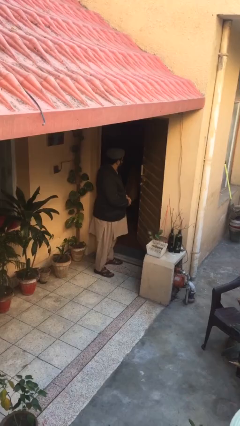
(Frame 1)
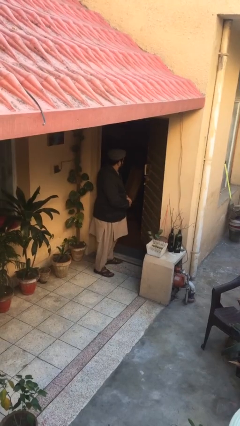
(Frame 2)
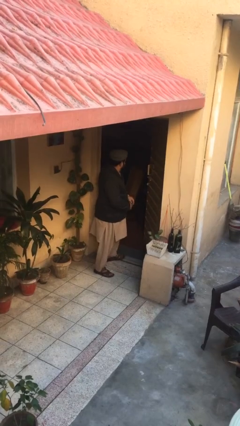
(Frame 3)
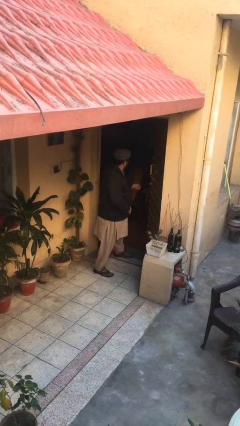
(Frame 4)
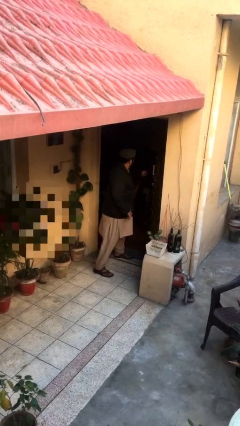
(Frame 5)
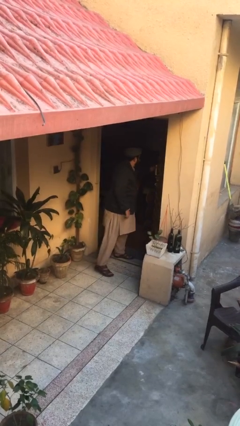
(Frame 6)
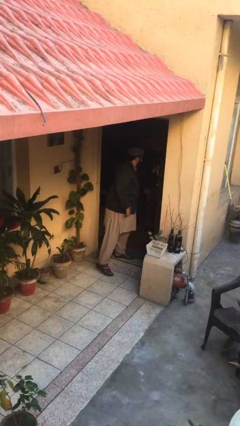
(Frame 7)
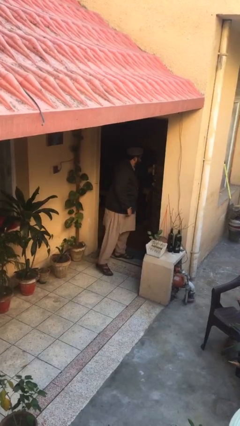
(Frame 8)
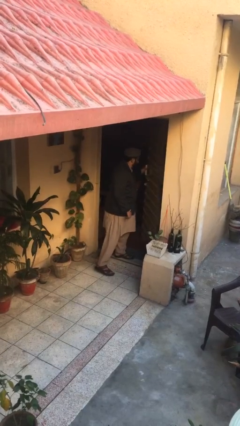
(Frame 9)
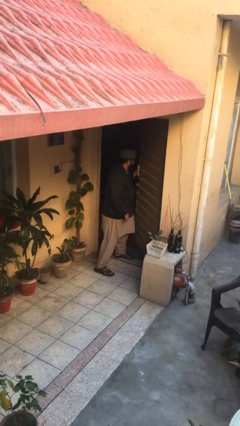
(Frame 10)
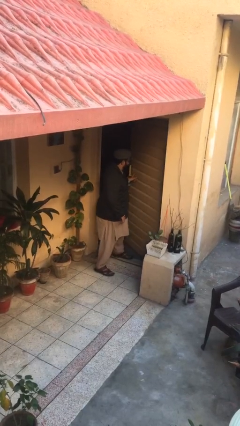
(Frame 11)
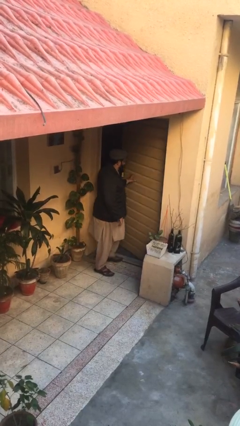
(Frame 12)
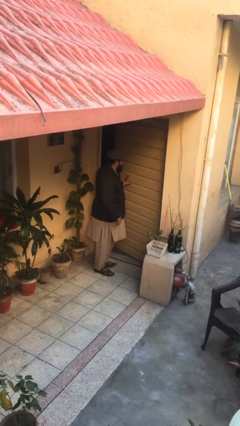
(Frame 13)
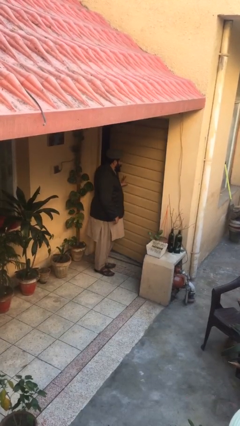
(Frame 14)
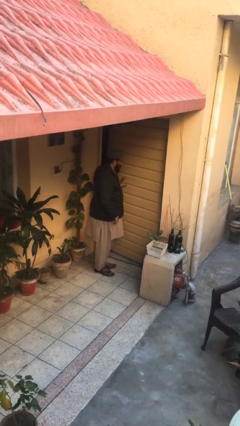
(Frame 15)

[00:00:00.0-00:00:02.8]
person closes facility door

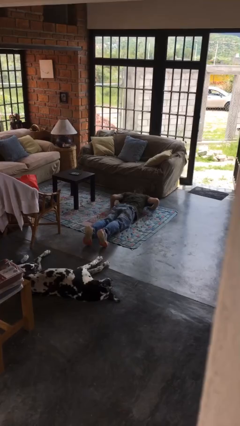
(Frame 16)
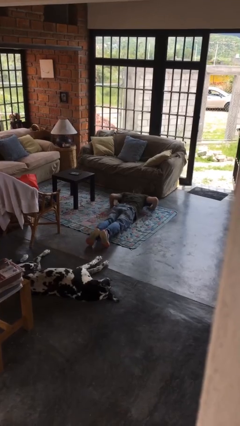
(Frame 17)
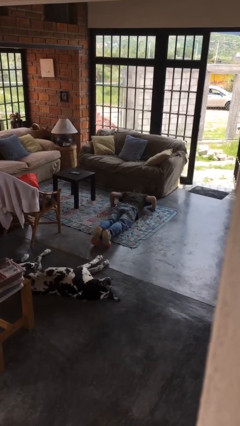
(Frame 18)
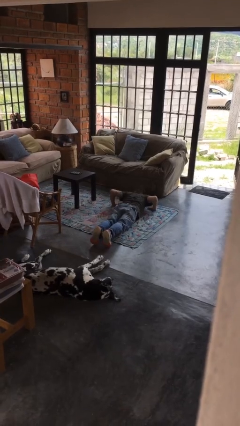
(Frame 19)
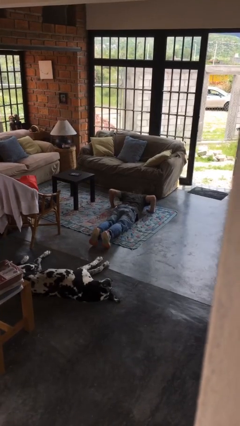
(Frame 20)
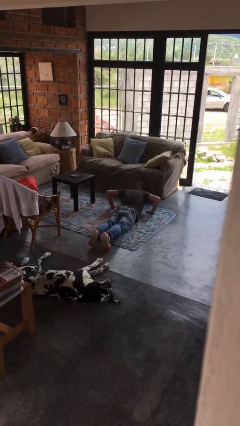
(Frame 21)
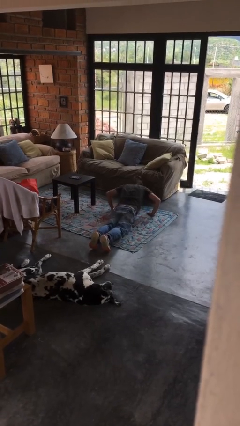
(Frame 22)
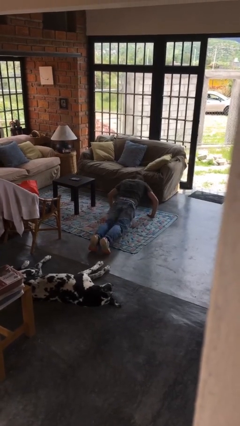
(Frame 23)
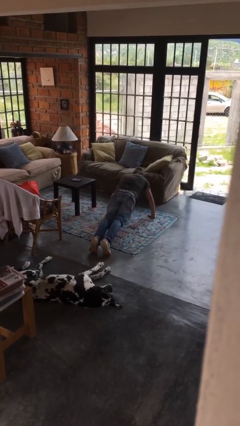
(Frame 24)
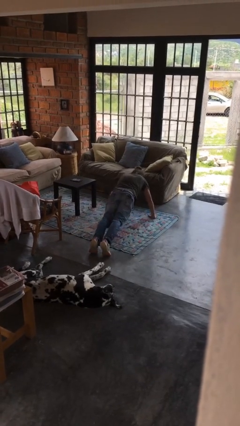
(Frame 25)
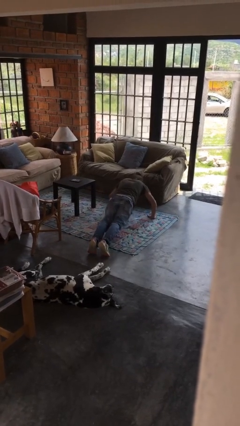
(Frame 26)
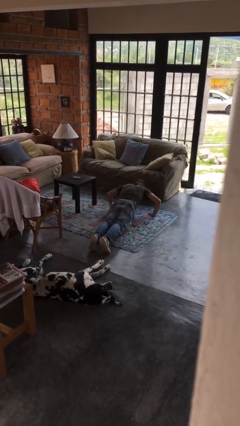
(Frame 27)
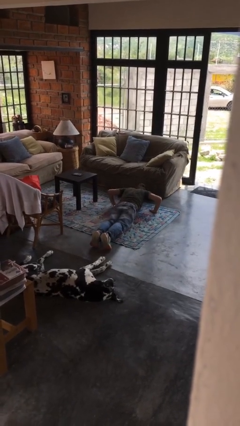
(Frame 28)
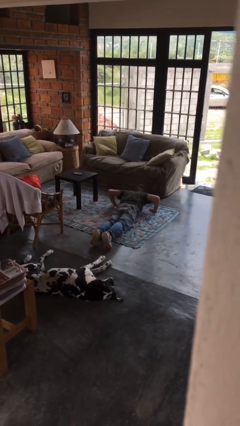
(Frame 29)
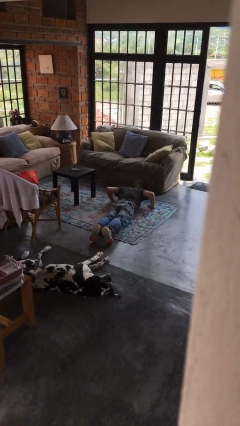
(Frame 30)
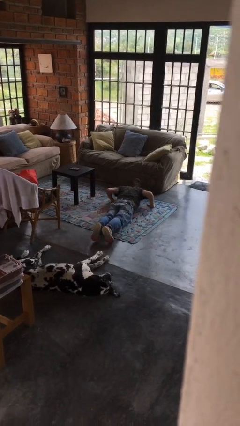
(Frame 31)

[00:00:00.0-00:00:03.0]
person exercises with pushup

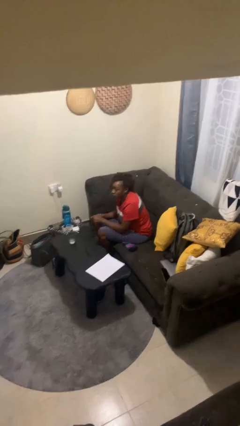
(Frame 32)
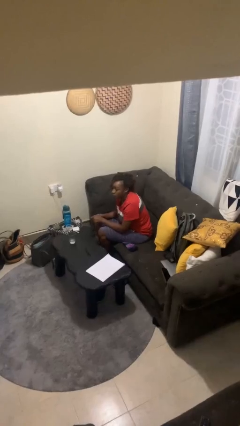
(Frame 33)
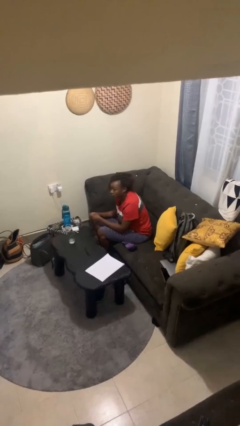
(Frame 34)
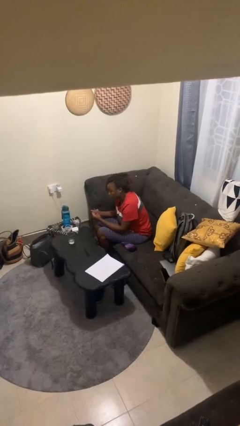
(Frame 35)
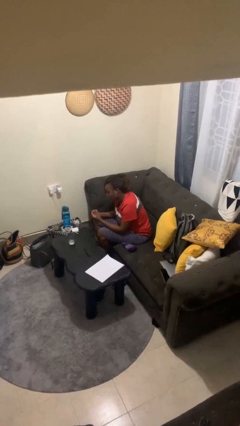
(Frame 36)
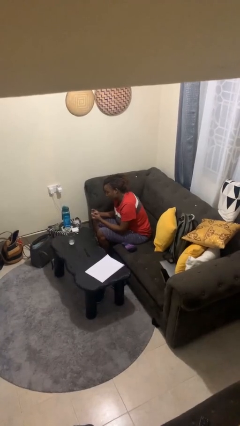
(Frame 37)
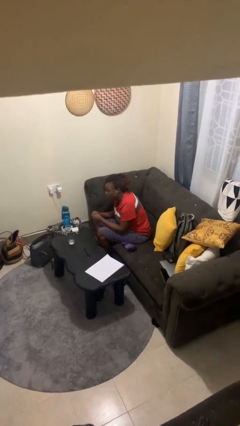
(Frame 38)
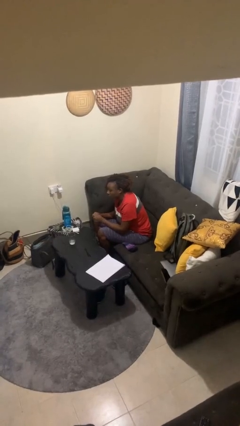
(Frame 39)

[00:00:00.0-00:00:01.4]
person snaps fingers

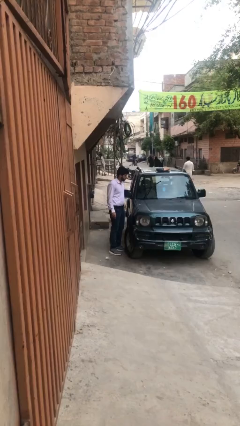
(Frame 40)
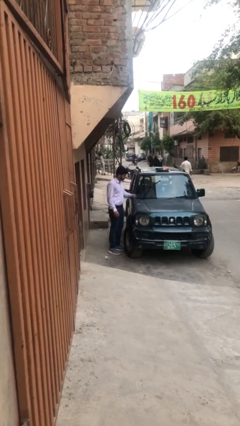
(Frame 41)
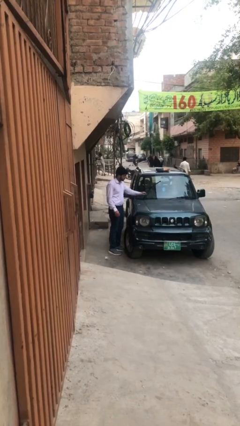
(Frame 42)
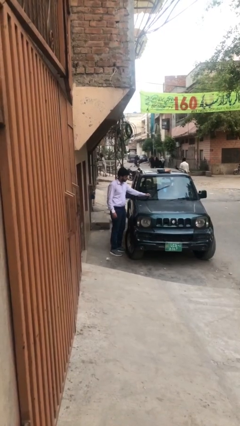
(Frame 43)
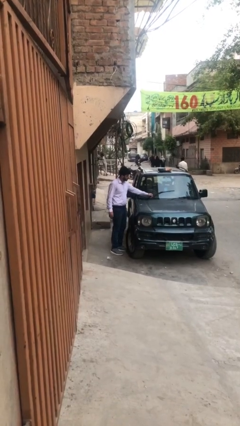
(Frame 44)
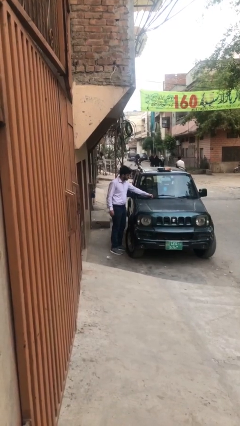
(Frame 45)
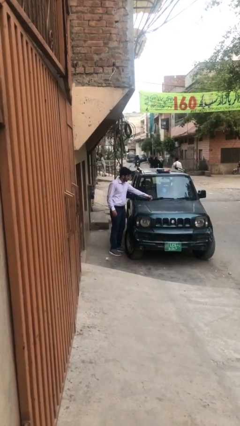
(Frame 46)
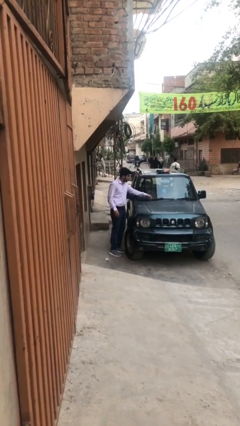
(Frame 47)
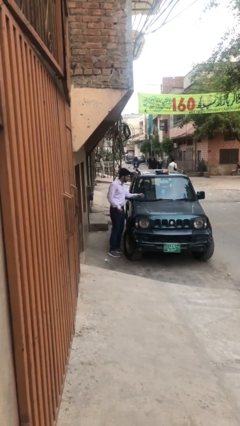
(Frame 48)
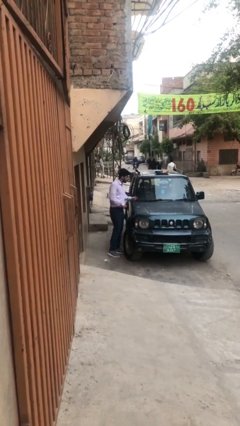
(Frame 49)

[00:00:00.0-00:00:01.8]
person flips down car wipers

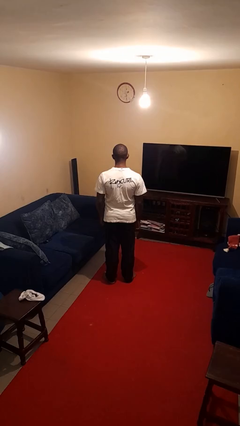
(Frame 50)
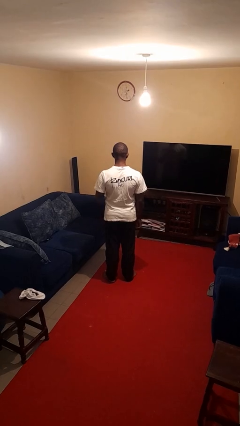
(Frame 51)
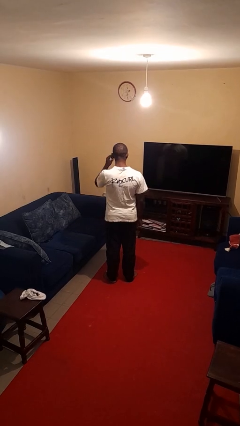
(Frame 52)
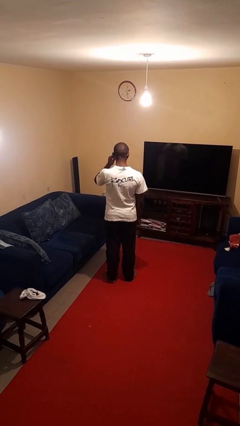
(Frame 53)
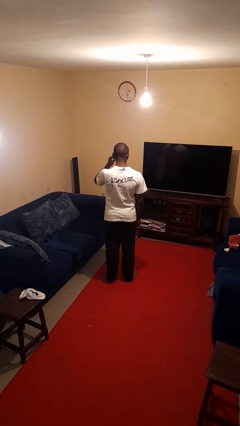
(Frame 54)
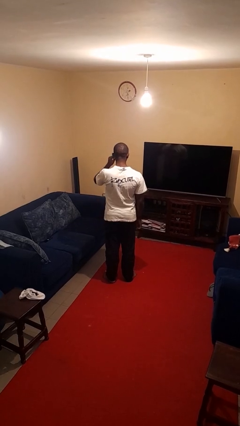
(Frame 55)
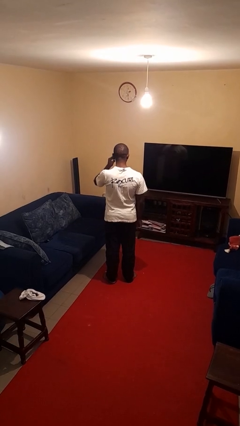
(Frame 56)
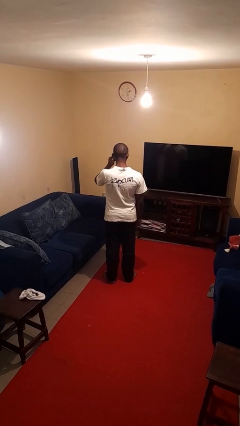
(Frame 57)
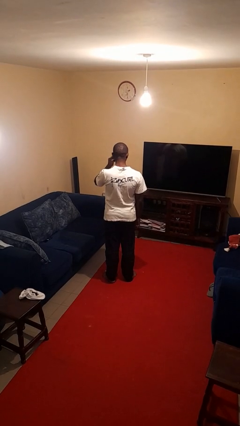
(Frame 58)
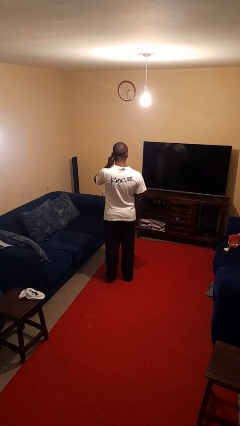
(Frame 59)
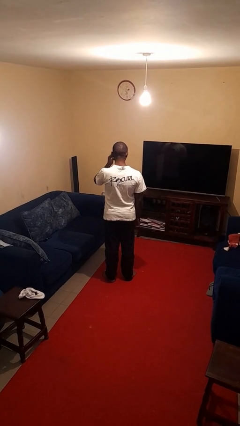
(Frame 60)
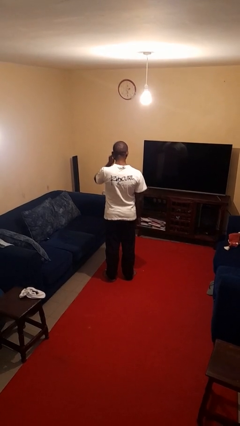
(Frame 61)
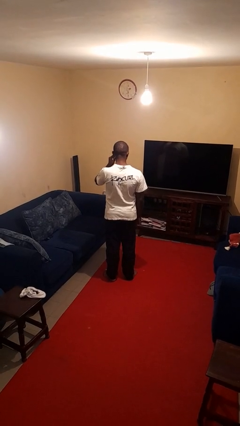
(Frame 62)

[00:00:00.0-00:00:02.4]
person touches earlobe

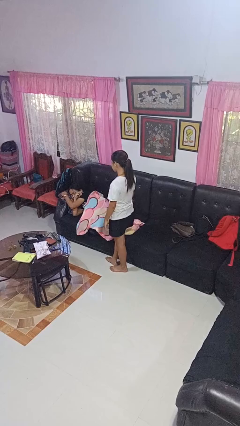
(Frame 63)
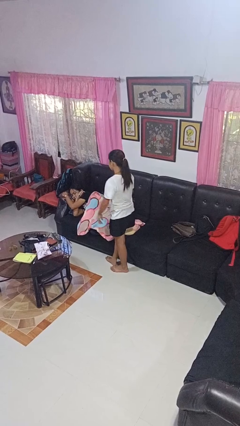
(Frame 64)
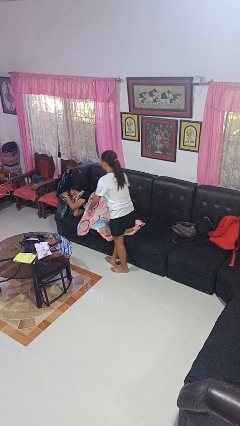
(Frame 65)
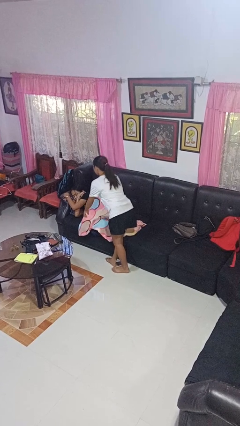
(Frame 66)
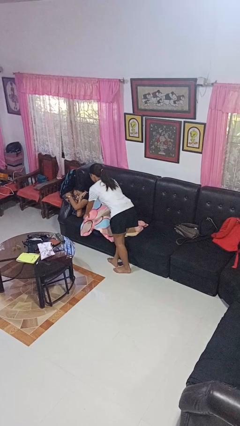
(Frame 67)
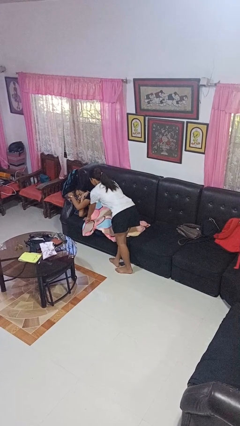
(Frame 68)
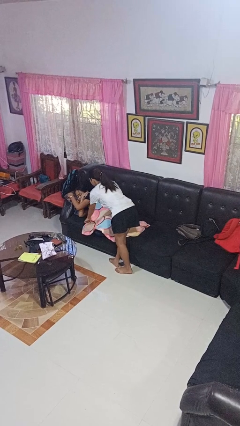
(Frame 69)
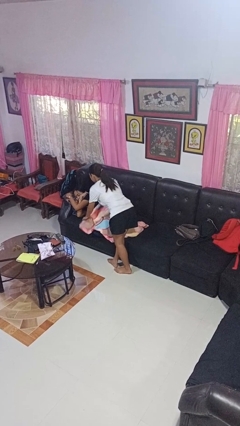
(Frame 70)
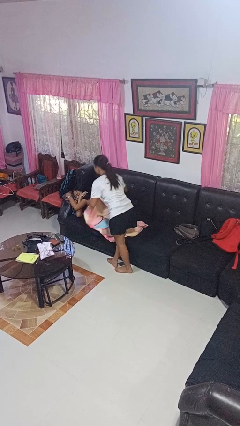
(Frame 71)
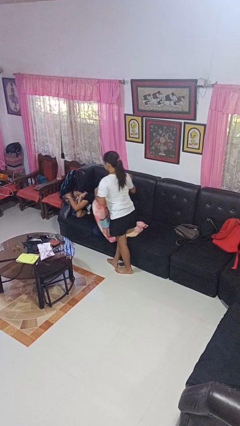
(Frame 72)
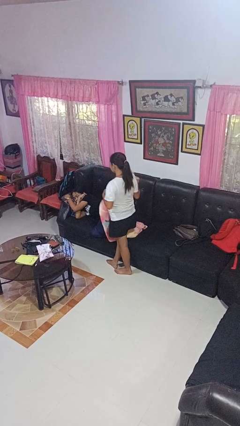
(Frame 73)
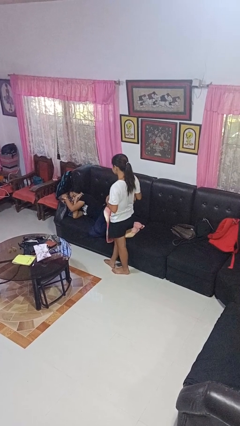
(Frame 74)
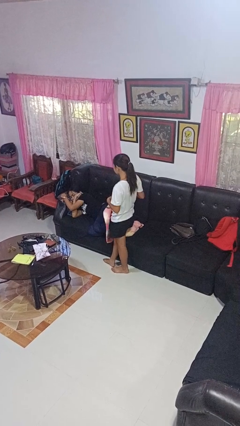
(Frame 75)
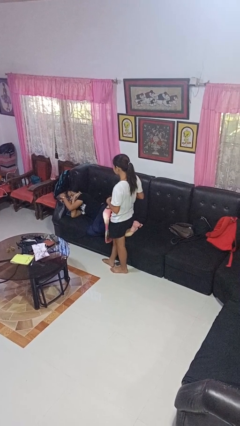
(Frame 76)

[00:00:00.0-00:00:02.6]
person uncovers friend with blanket

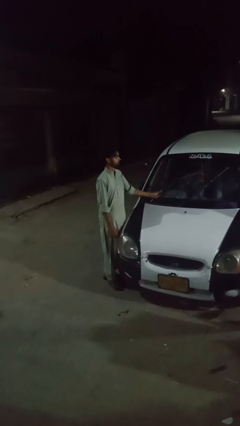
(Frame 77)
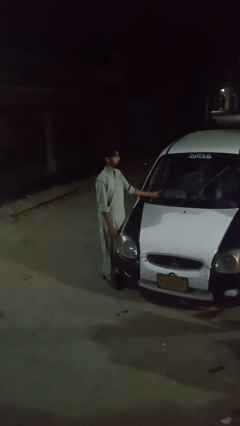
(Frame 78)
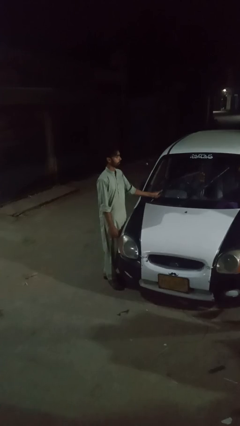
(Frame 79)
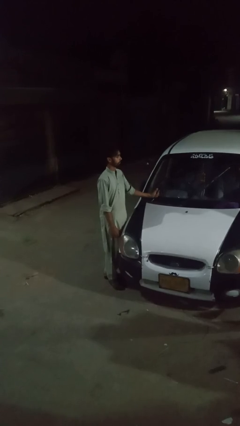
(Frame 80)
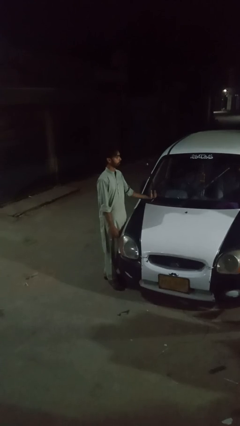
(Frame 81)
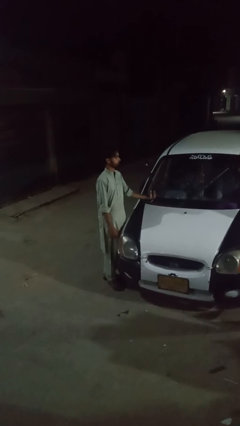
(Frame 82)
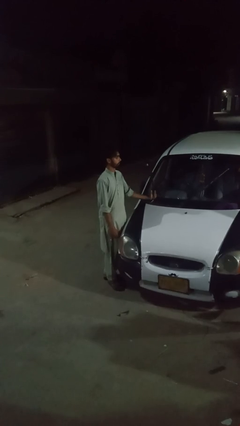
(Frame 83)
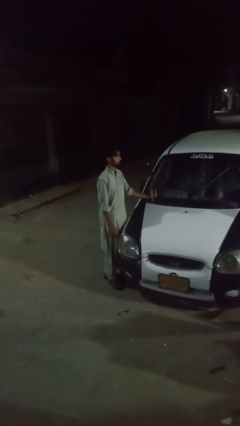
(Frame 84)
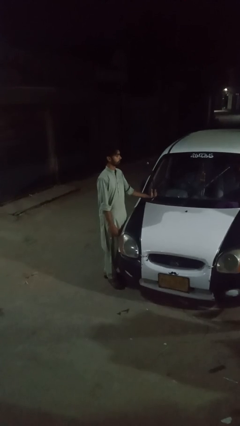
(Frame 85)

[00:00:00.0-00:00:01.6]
person flips up car wipers

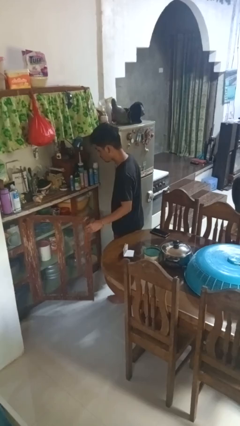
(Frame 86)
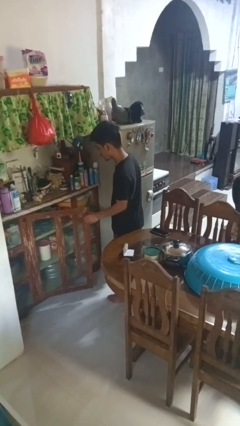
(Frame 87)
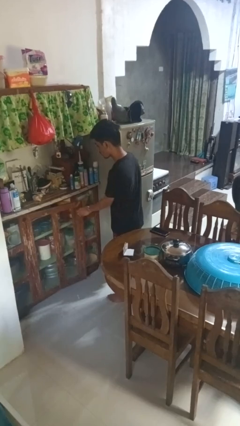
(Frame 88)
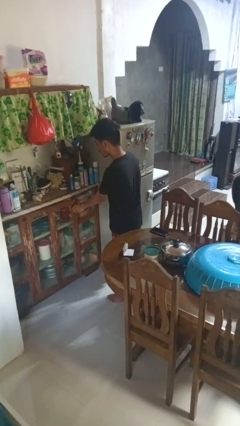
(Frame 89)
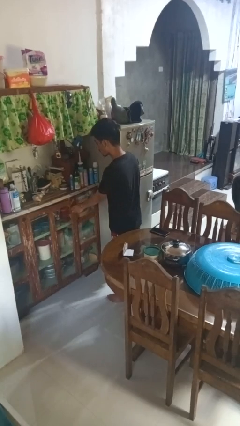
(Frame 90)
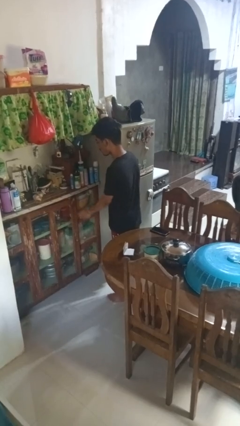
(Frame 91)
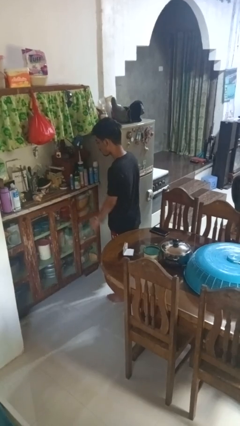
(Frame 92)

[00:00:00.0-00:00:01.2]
person closes cabinet
